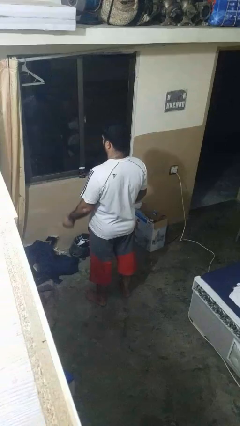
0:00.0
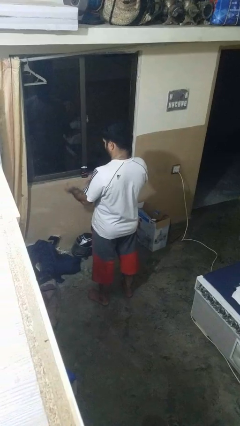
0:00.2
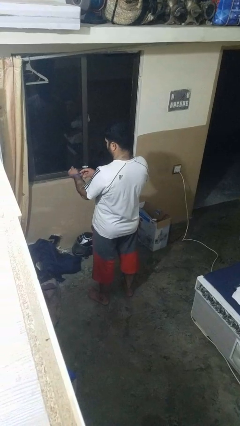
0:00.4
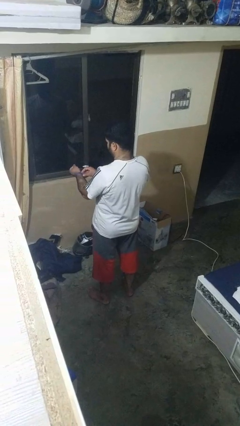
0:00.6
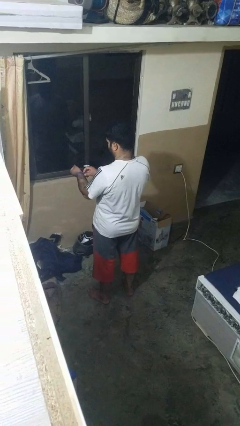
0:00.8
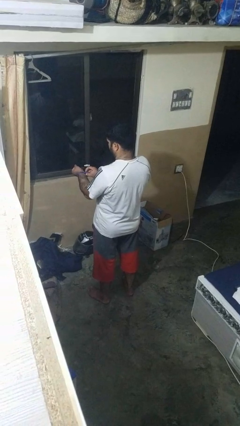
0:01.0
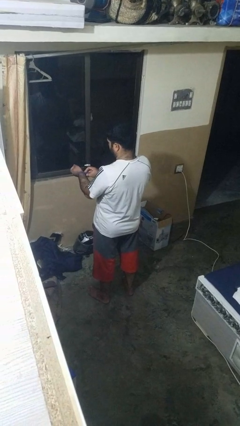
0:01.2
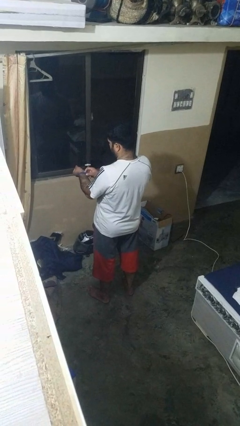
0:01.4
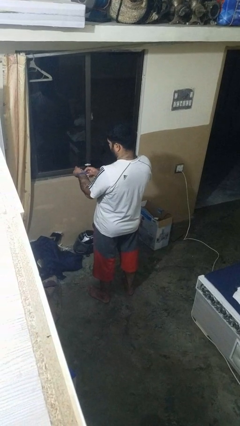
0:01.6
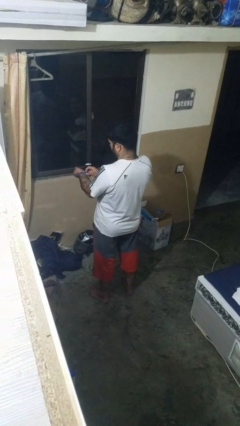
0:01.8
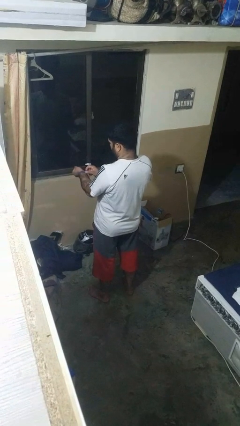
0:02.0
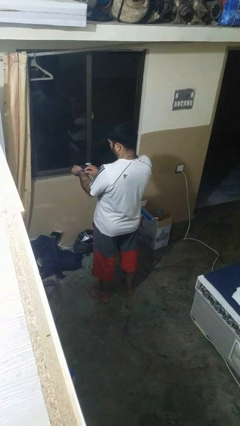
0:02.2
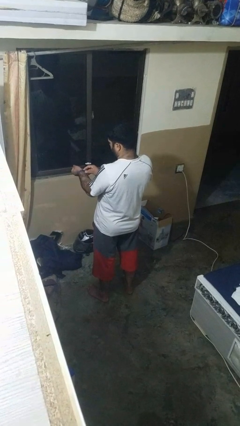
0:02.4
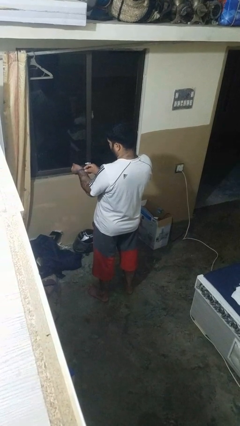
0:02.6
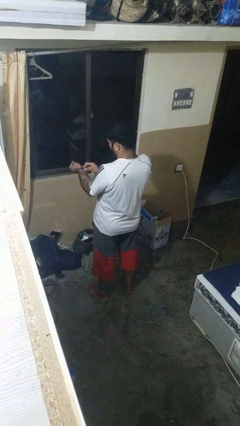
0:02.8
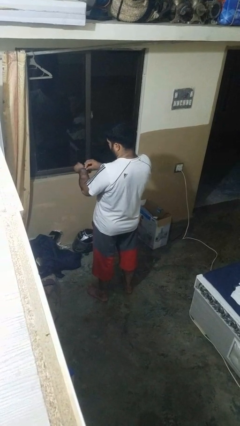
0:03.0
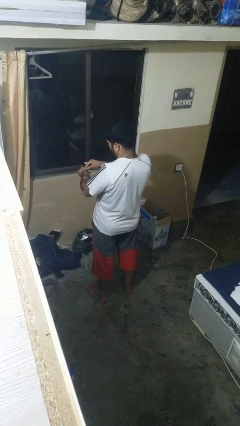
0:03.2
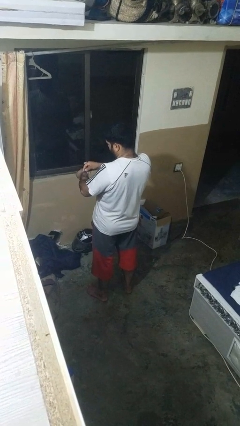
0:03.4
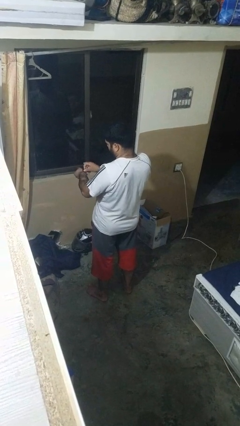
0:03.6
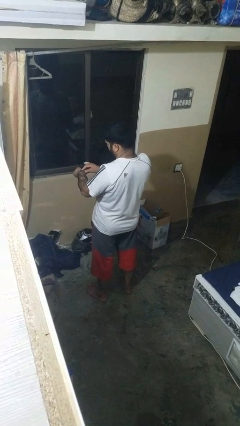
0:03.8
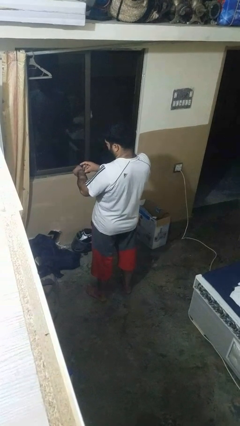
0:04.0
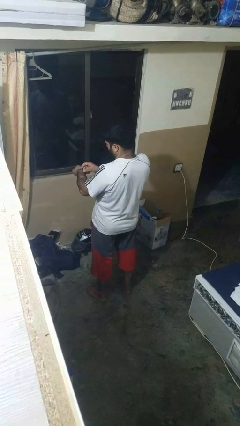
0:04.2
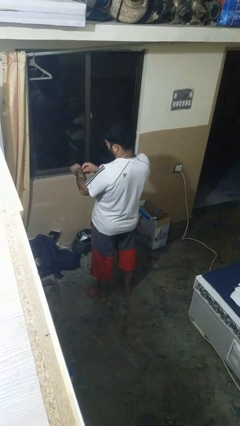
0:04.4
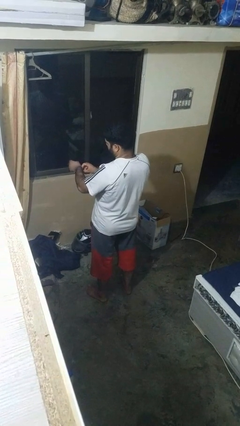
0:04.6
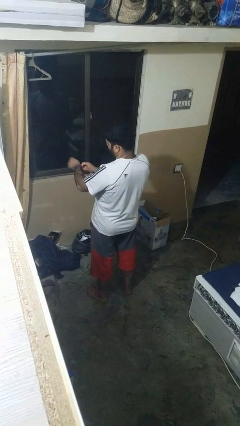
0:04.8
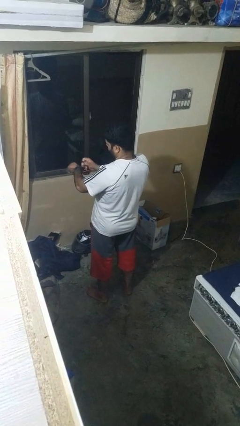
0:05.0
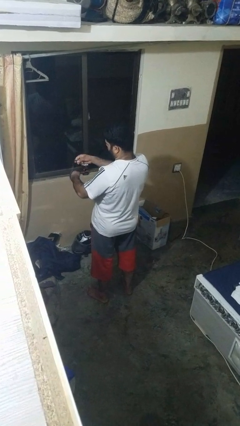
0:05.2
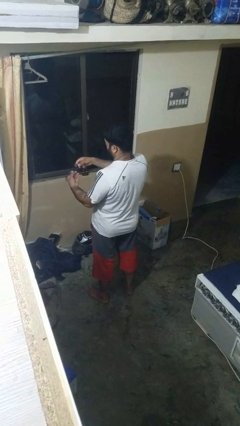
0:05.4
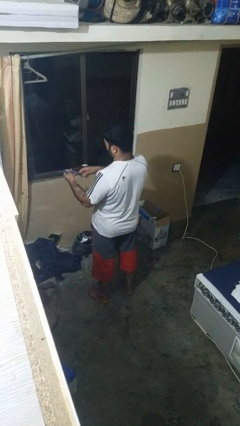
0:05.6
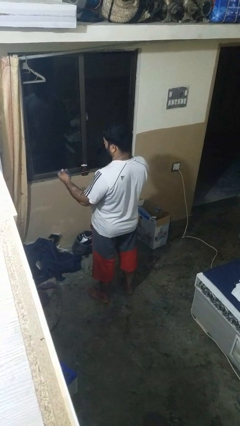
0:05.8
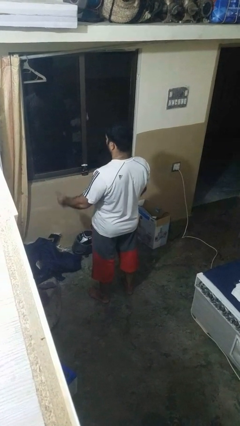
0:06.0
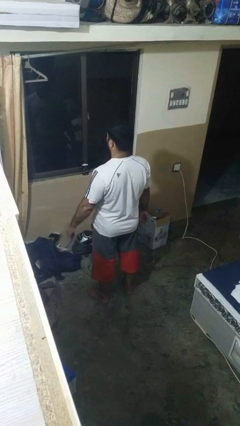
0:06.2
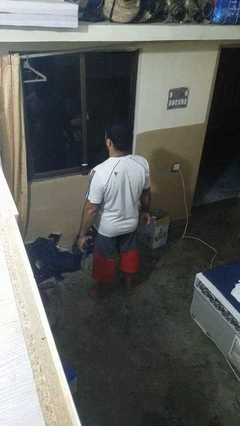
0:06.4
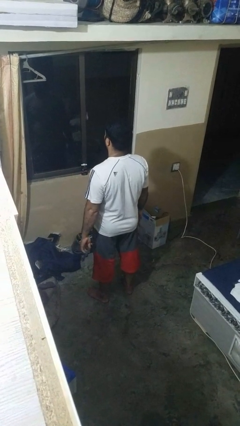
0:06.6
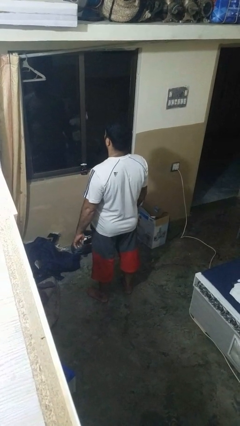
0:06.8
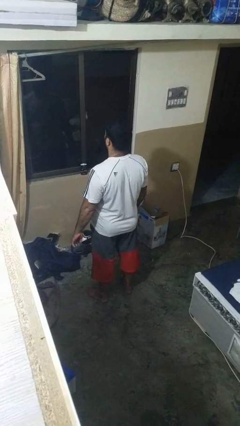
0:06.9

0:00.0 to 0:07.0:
person takes off wristwatch

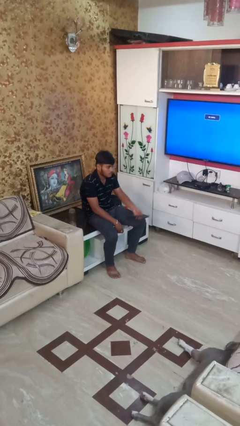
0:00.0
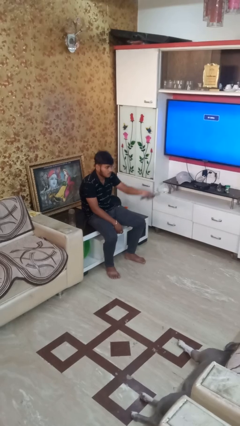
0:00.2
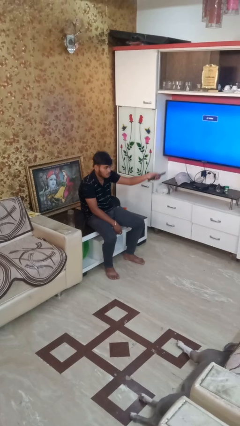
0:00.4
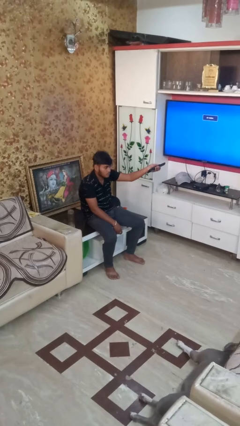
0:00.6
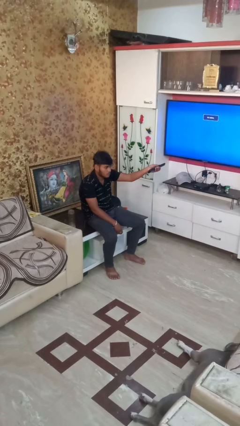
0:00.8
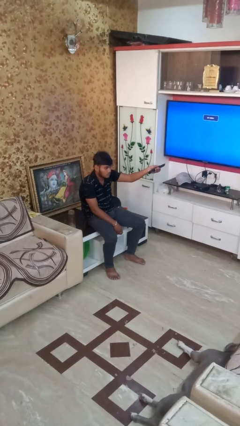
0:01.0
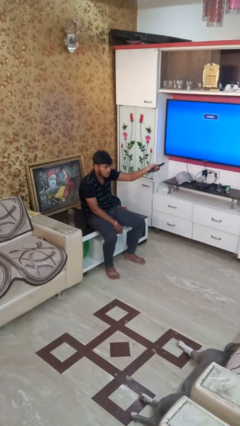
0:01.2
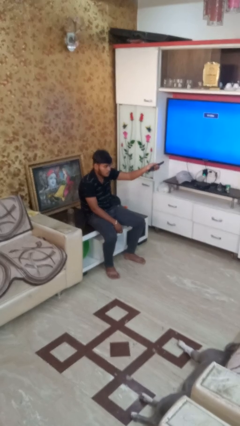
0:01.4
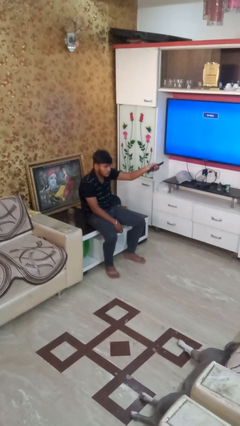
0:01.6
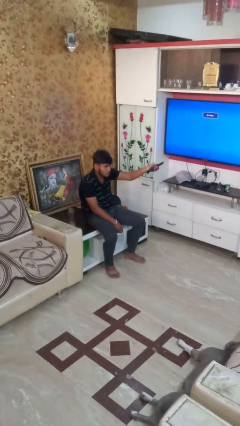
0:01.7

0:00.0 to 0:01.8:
person uses television remote

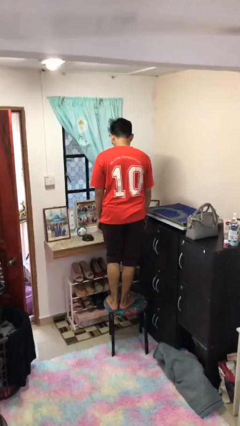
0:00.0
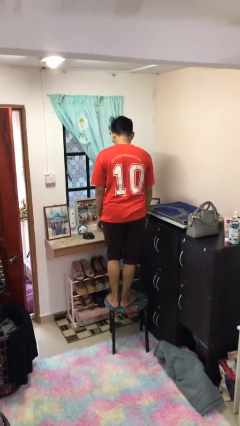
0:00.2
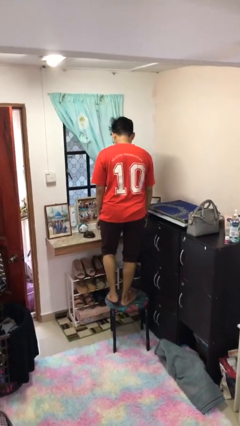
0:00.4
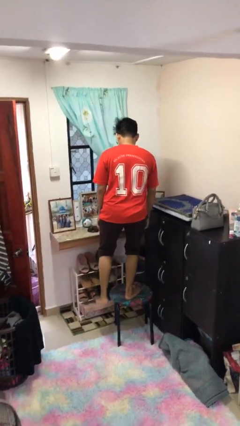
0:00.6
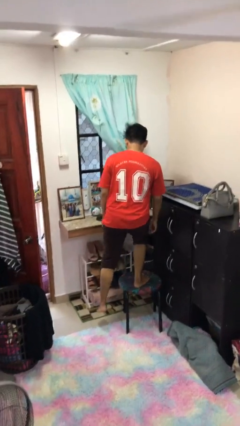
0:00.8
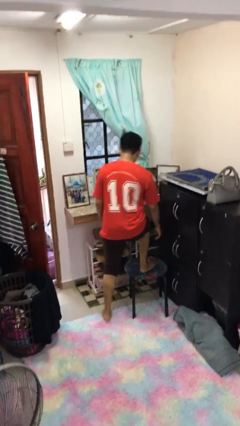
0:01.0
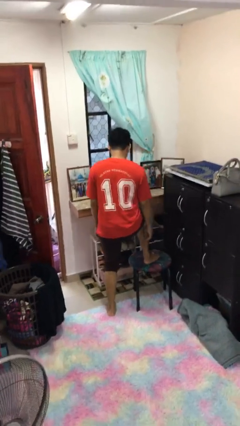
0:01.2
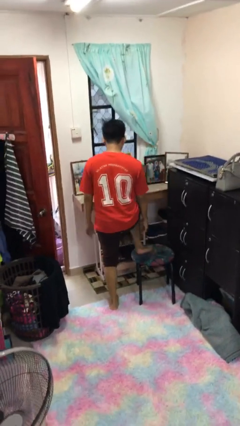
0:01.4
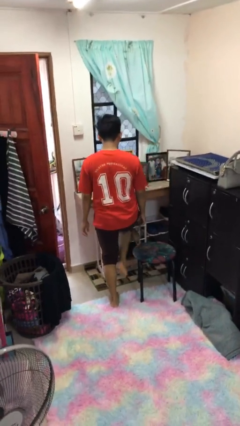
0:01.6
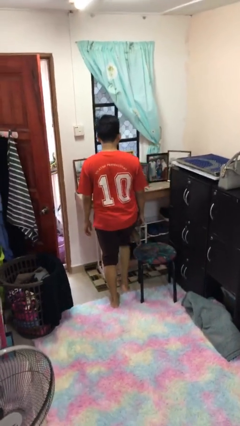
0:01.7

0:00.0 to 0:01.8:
person climbs off chair

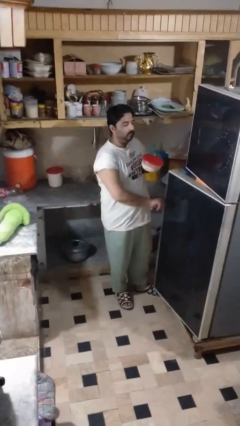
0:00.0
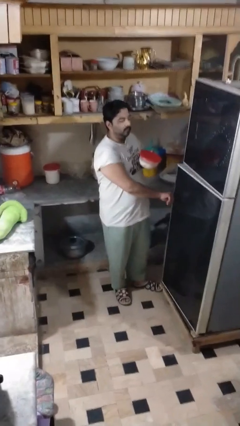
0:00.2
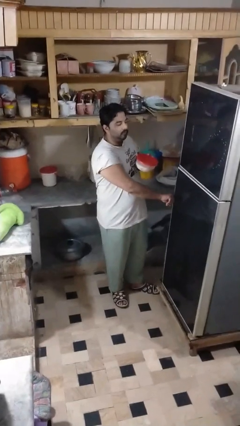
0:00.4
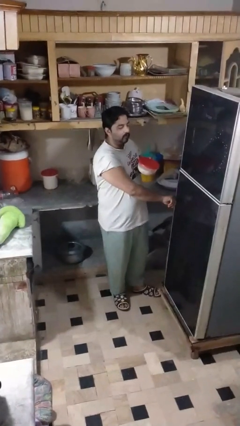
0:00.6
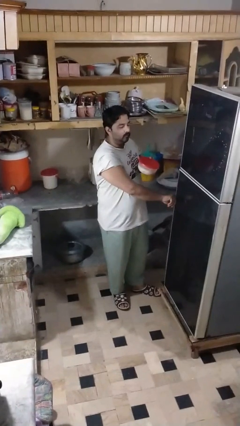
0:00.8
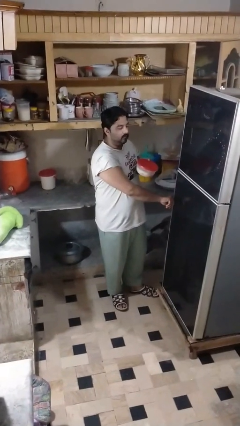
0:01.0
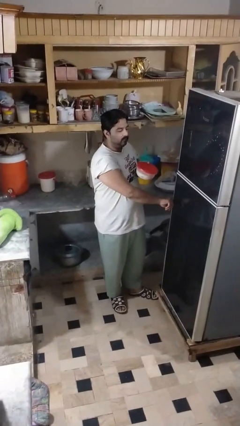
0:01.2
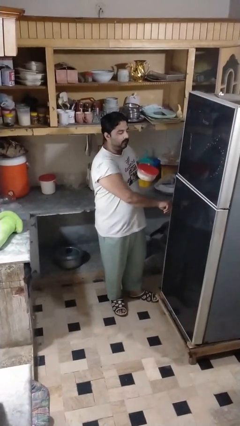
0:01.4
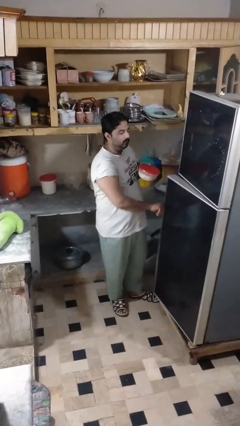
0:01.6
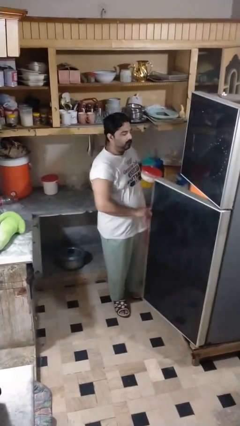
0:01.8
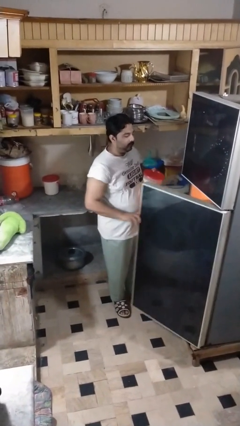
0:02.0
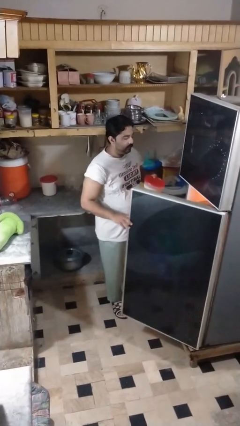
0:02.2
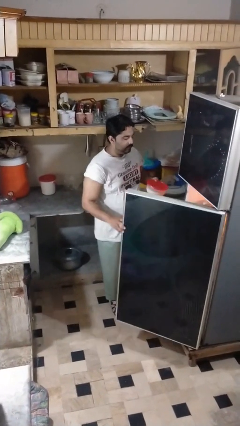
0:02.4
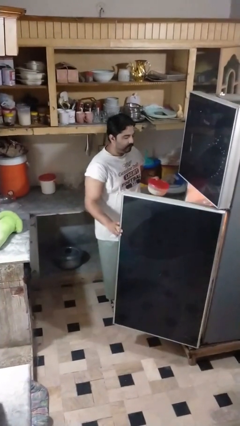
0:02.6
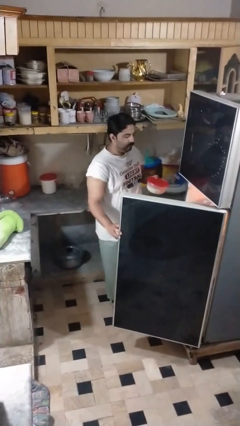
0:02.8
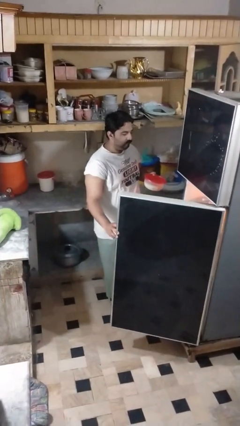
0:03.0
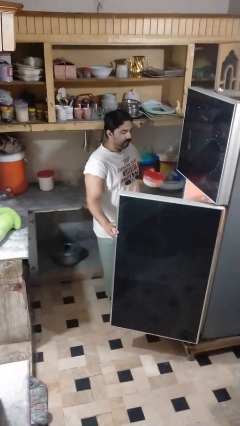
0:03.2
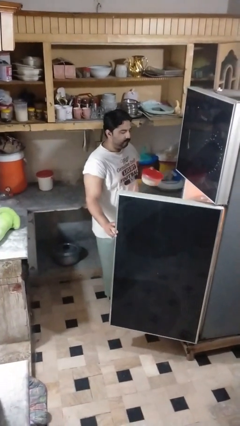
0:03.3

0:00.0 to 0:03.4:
person opens refrigerator

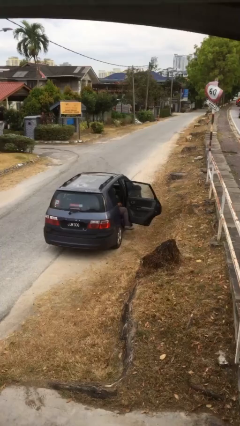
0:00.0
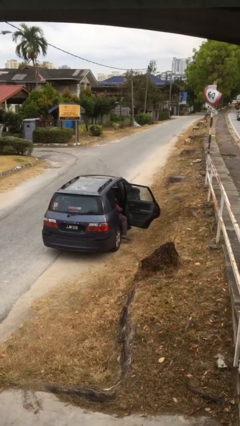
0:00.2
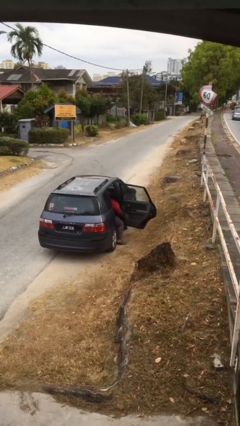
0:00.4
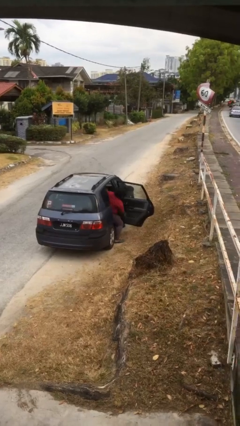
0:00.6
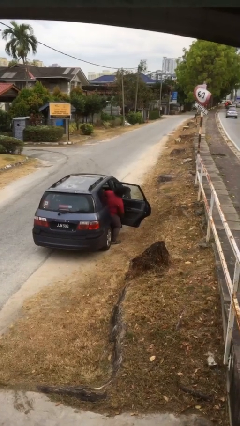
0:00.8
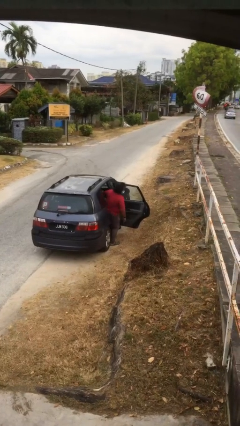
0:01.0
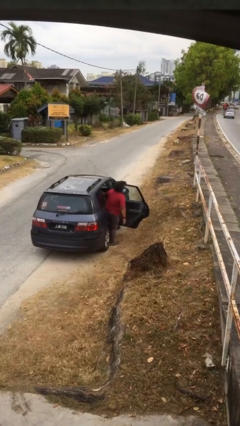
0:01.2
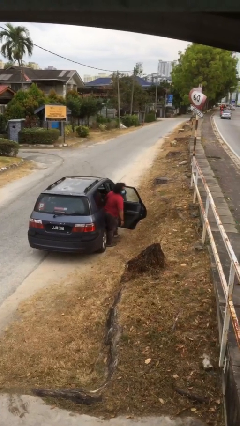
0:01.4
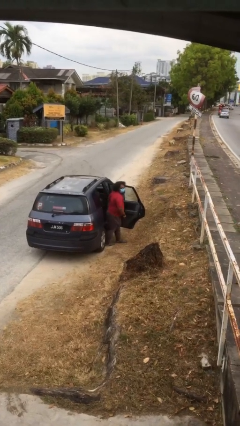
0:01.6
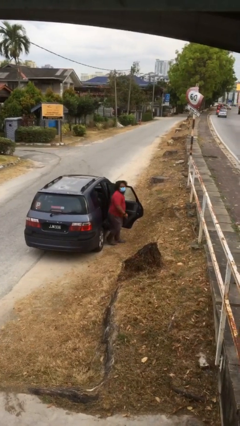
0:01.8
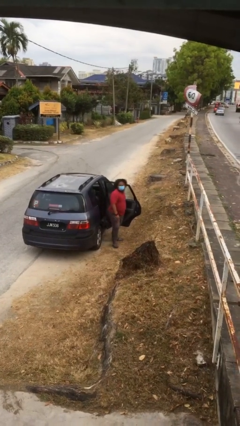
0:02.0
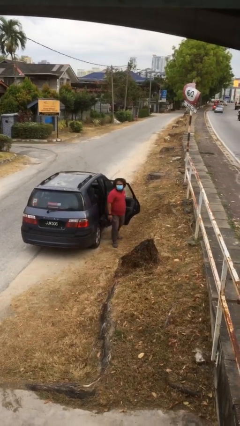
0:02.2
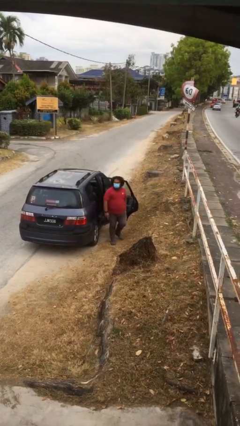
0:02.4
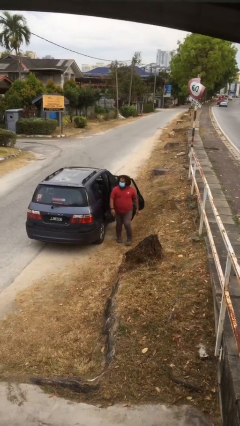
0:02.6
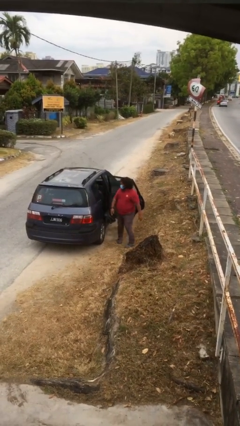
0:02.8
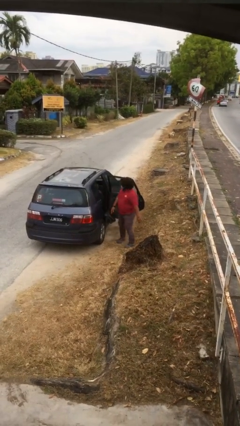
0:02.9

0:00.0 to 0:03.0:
person exits car

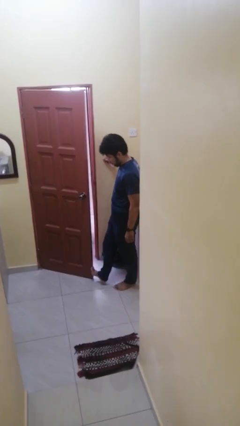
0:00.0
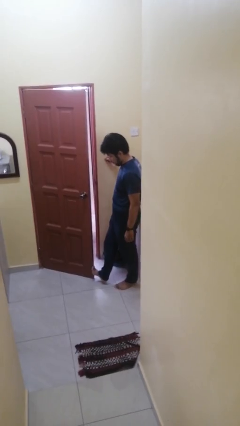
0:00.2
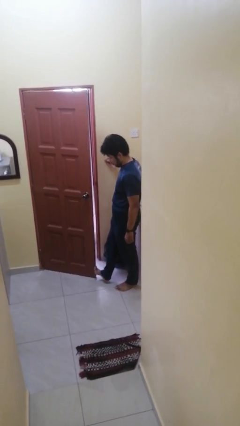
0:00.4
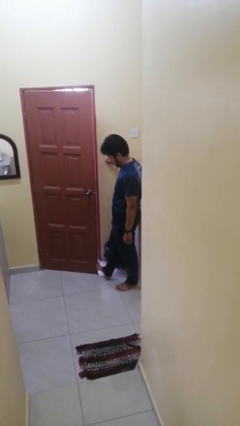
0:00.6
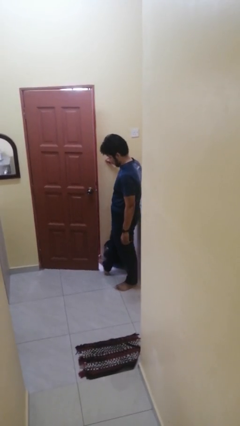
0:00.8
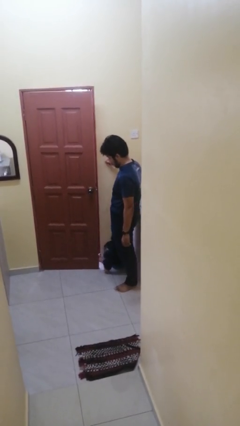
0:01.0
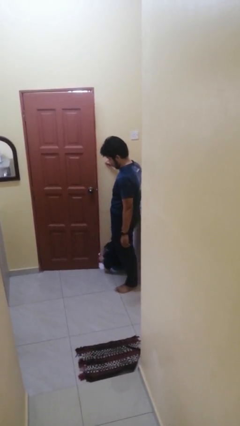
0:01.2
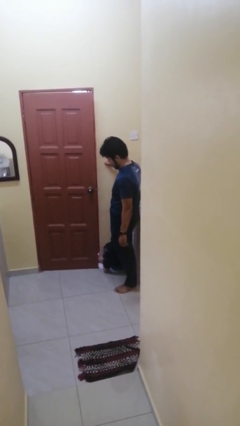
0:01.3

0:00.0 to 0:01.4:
person closes door with foot
